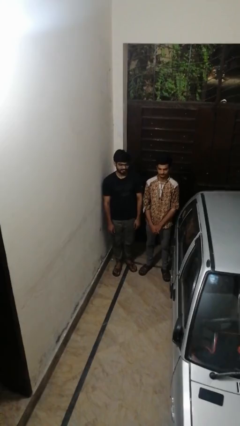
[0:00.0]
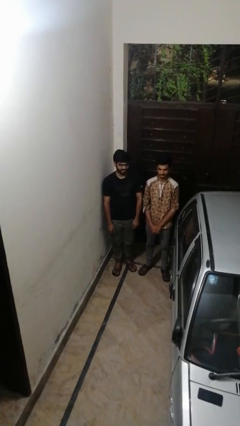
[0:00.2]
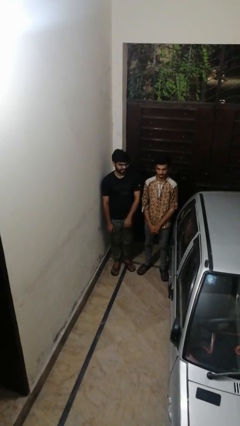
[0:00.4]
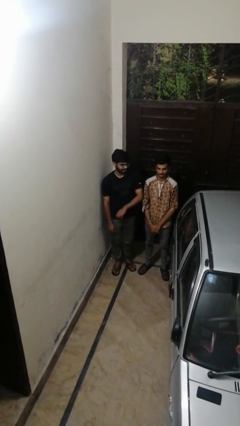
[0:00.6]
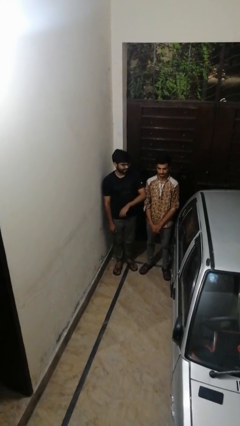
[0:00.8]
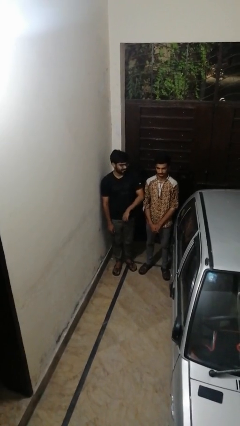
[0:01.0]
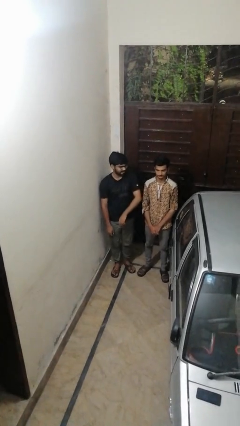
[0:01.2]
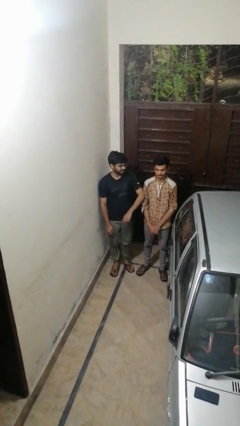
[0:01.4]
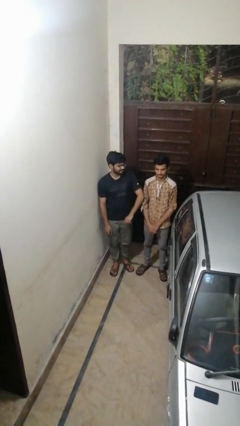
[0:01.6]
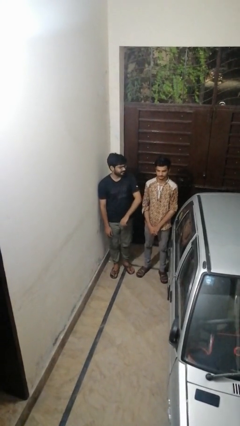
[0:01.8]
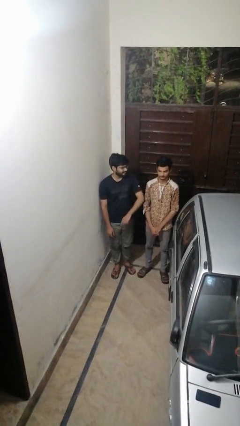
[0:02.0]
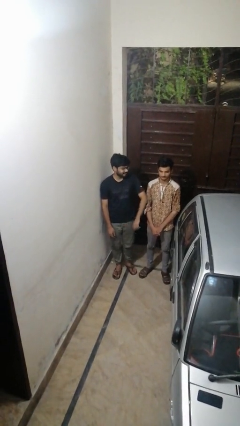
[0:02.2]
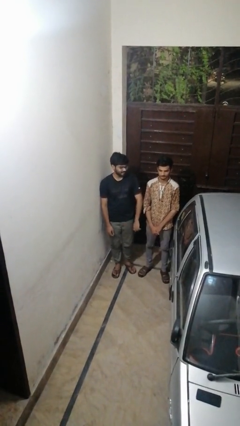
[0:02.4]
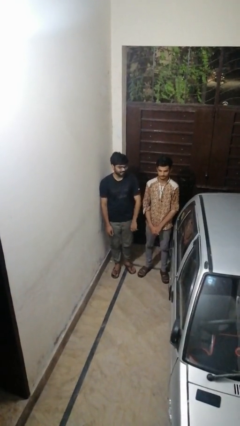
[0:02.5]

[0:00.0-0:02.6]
person nudges person with elbow

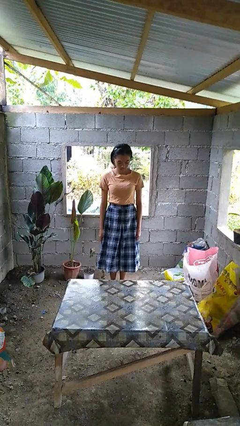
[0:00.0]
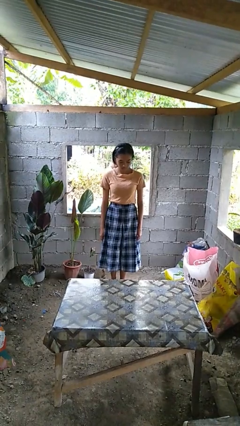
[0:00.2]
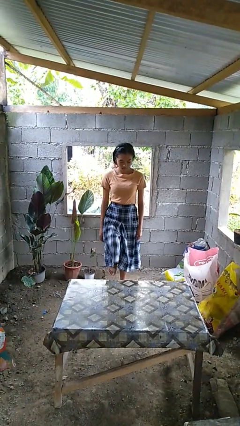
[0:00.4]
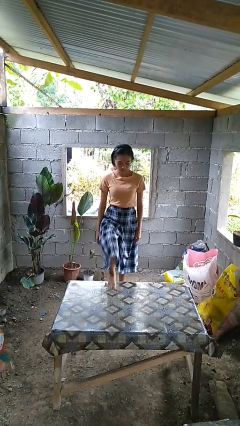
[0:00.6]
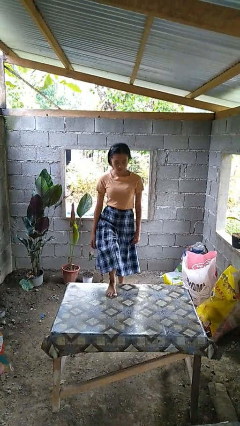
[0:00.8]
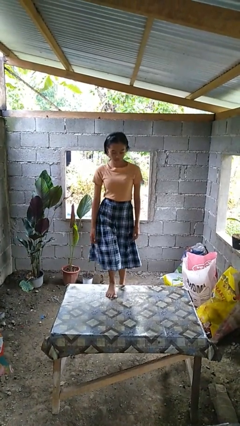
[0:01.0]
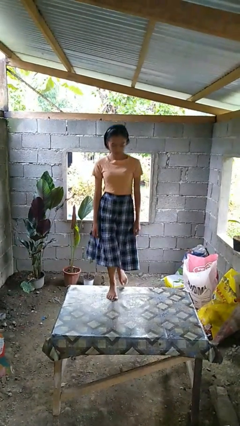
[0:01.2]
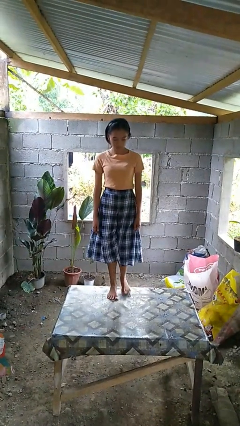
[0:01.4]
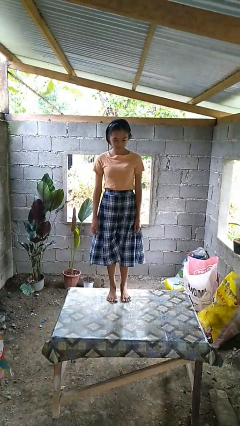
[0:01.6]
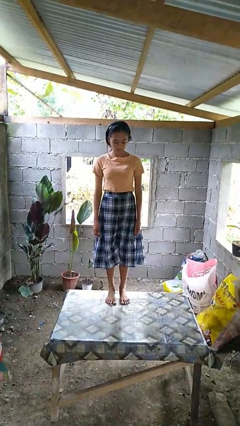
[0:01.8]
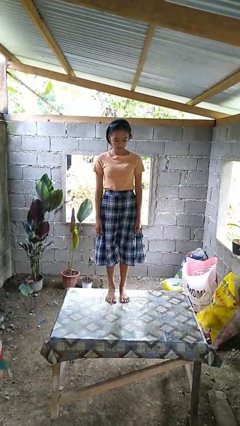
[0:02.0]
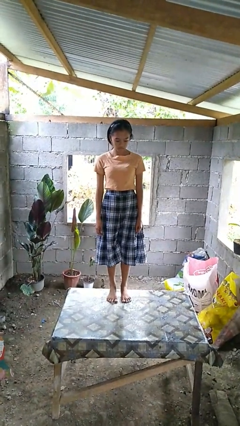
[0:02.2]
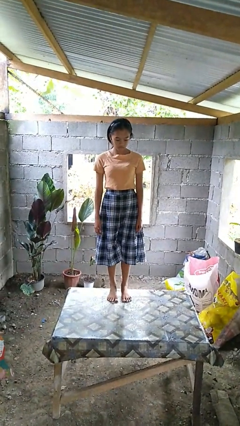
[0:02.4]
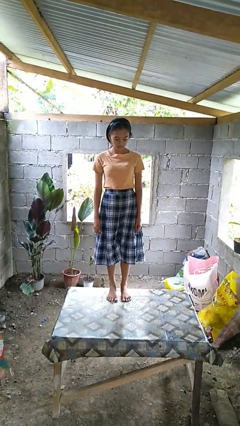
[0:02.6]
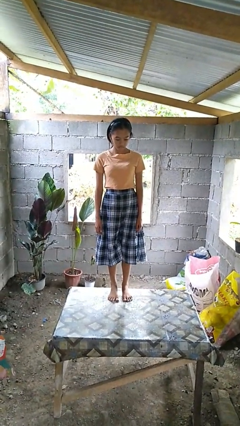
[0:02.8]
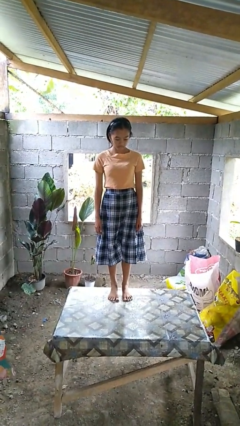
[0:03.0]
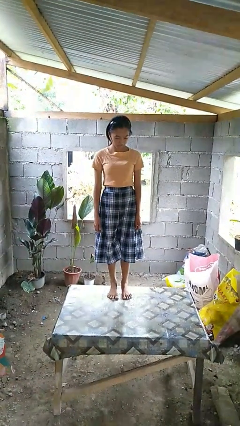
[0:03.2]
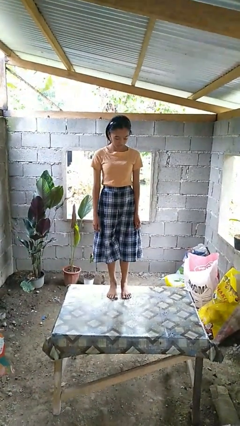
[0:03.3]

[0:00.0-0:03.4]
person climbs on table

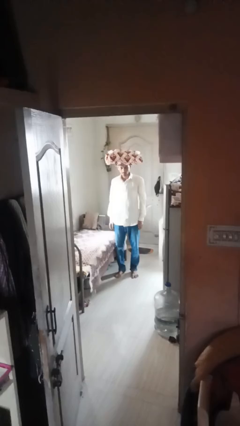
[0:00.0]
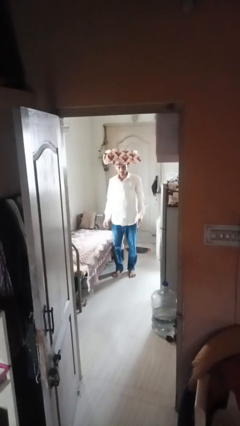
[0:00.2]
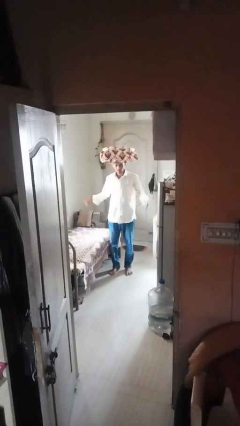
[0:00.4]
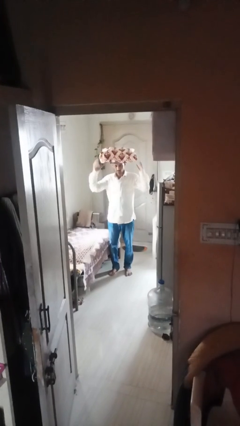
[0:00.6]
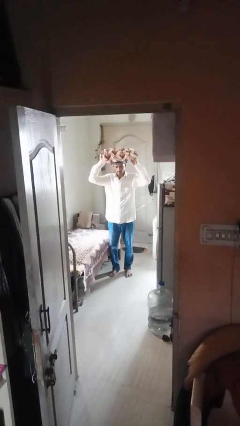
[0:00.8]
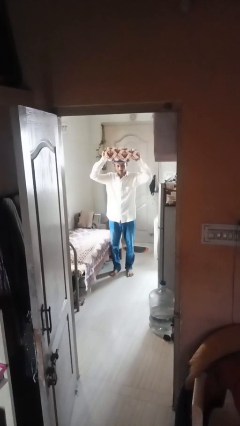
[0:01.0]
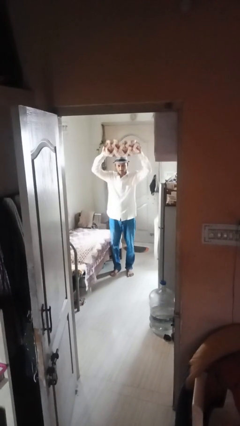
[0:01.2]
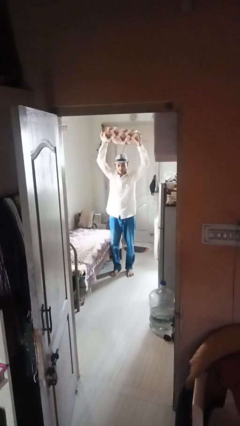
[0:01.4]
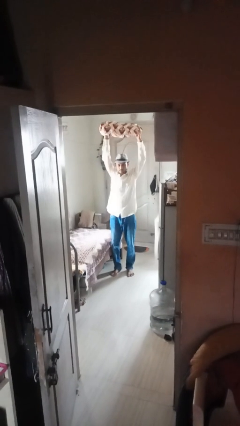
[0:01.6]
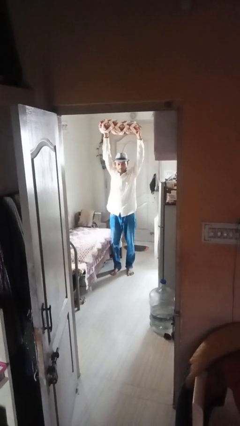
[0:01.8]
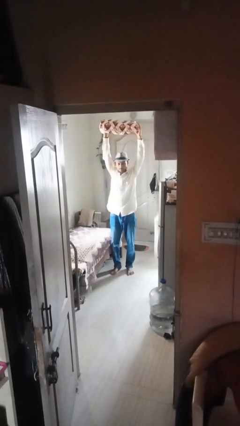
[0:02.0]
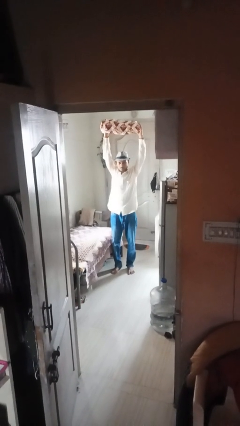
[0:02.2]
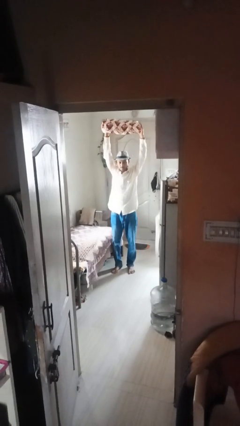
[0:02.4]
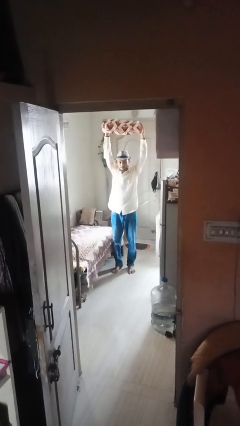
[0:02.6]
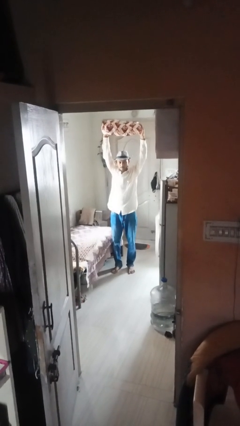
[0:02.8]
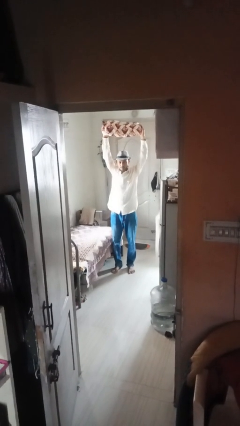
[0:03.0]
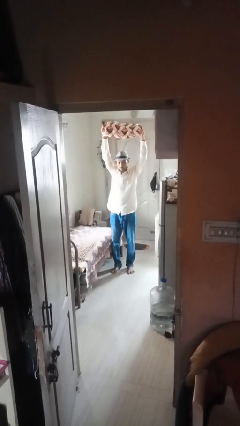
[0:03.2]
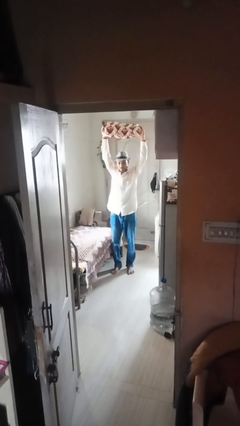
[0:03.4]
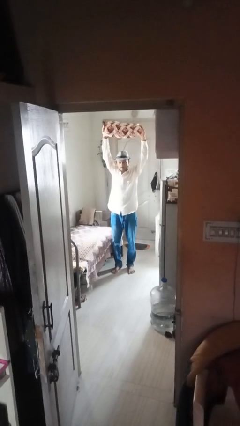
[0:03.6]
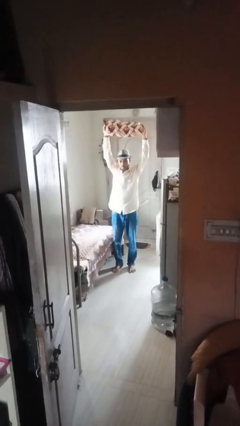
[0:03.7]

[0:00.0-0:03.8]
person holds object above head

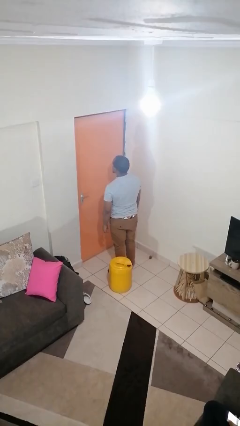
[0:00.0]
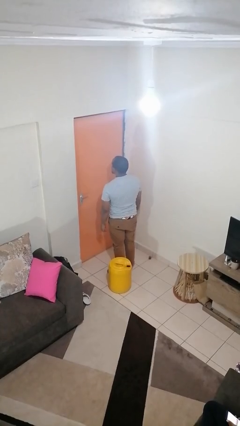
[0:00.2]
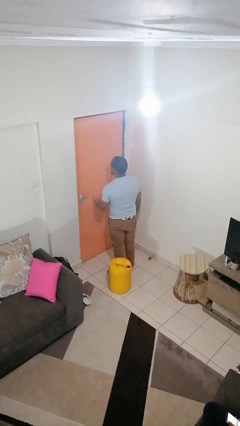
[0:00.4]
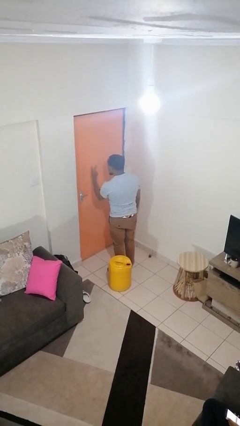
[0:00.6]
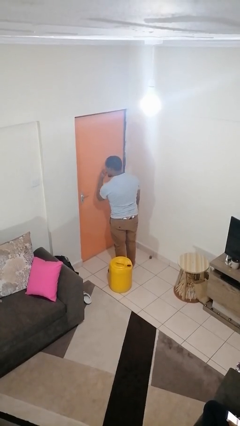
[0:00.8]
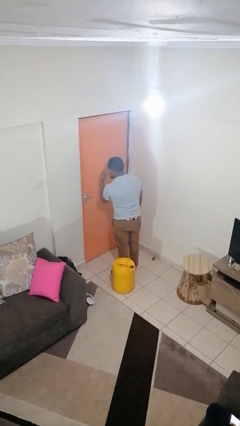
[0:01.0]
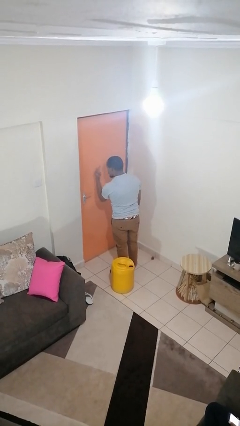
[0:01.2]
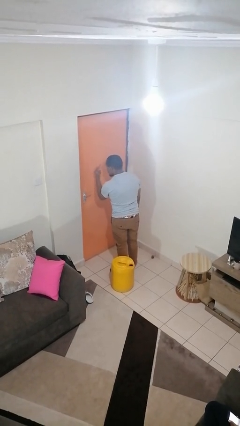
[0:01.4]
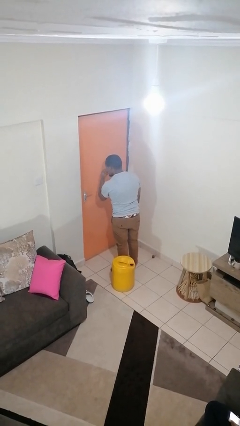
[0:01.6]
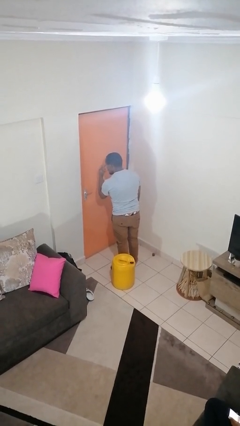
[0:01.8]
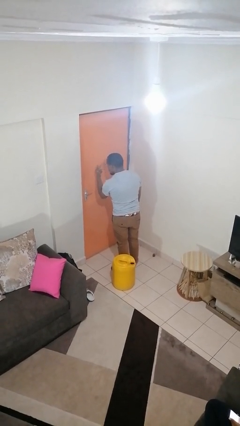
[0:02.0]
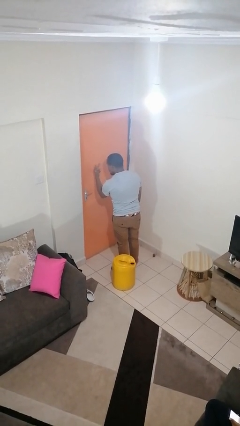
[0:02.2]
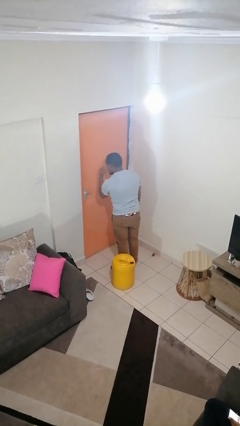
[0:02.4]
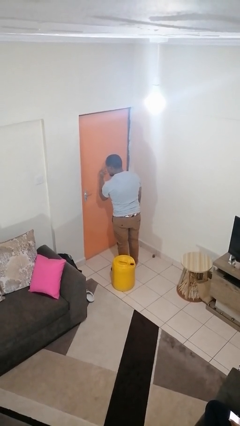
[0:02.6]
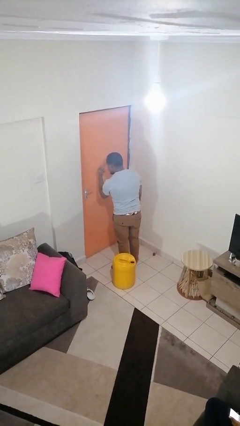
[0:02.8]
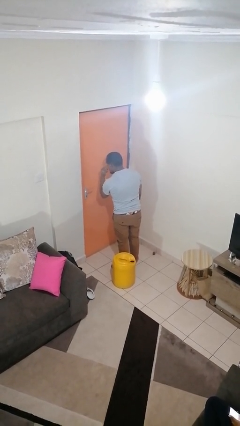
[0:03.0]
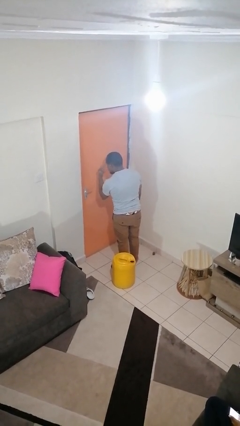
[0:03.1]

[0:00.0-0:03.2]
person gestures watch closely

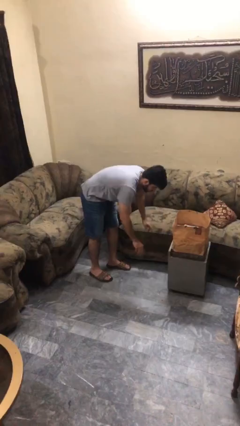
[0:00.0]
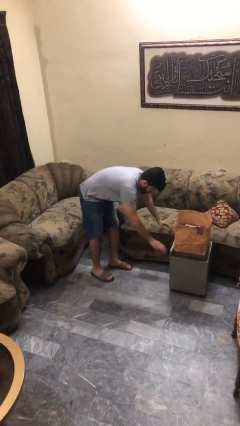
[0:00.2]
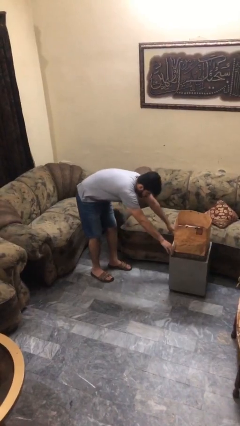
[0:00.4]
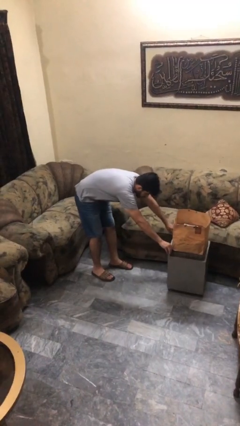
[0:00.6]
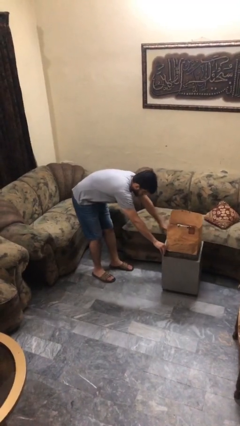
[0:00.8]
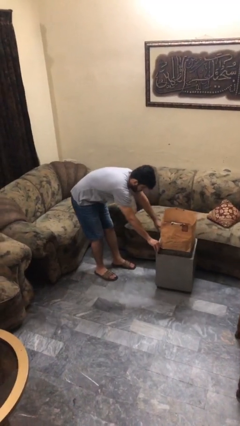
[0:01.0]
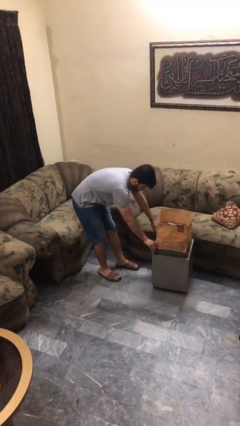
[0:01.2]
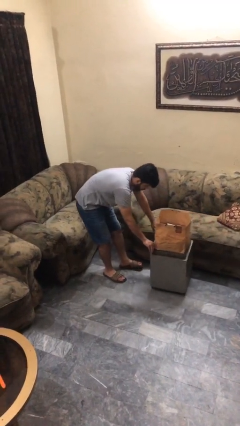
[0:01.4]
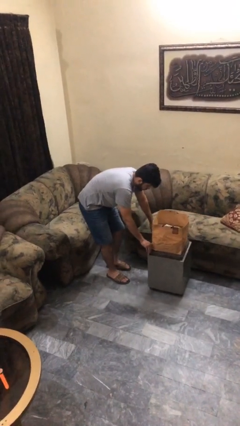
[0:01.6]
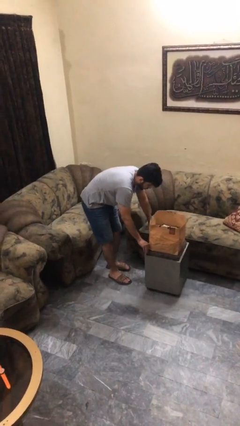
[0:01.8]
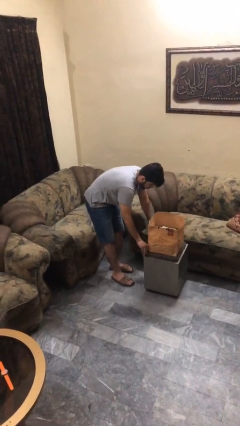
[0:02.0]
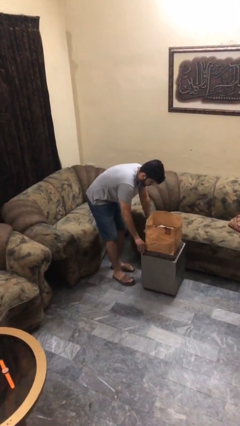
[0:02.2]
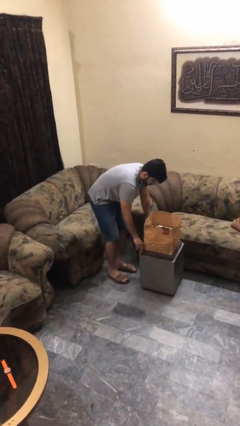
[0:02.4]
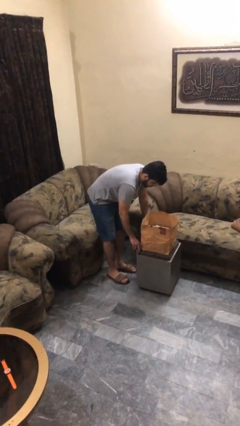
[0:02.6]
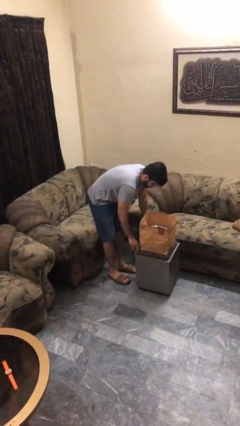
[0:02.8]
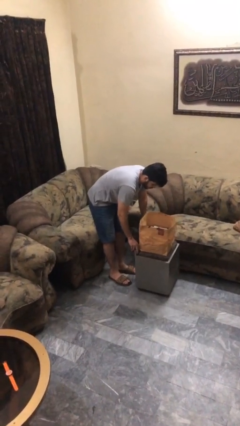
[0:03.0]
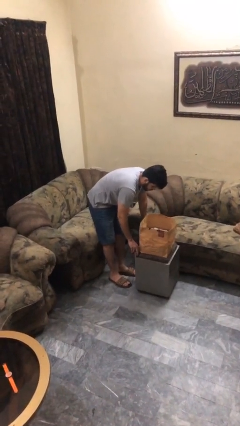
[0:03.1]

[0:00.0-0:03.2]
person pulls wheeled cart

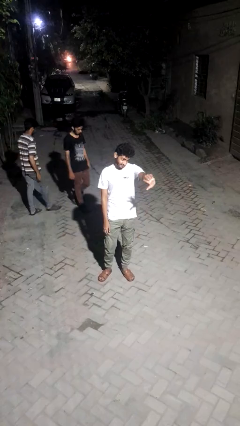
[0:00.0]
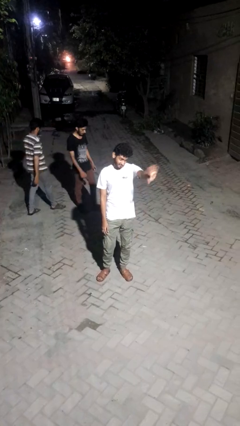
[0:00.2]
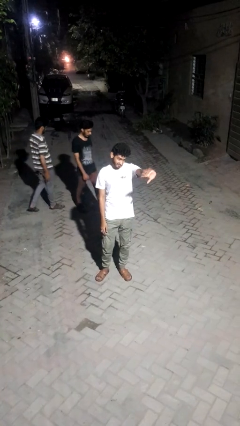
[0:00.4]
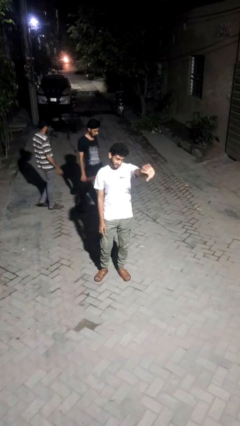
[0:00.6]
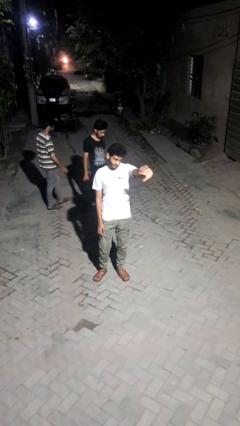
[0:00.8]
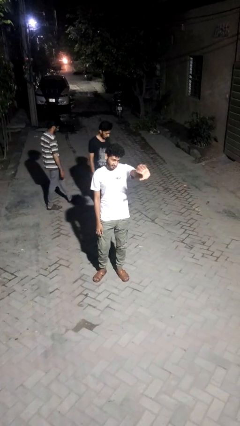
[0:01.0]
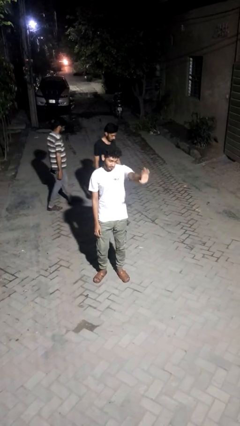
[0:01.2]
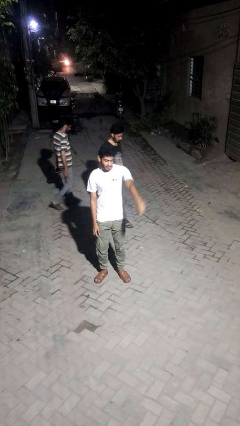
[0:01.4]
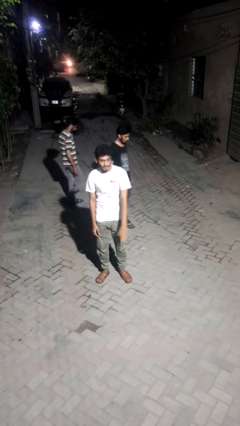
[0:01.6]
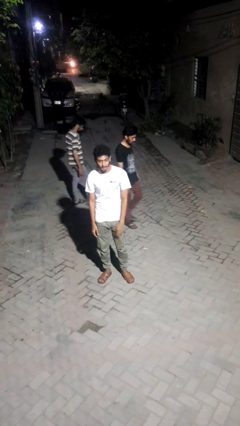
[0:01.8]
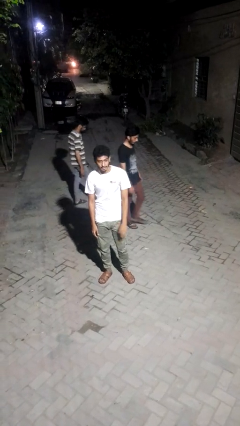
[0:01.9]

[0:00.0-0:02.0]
person waves at person
